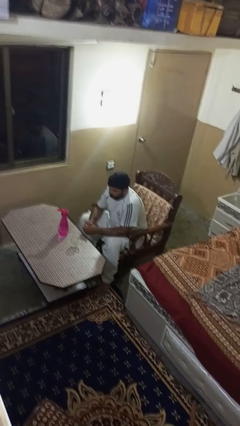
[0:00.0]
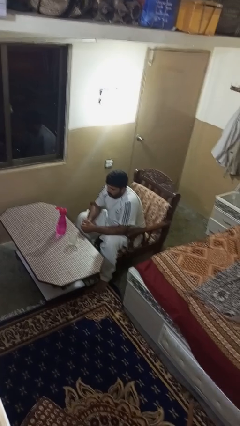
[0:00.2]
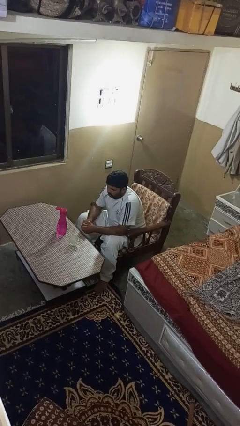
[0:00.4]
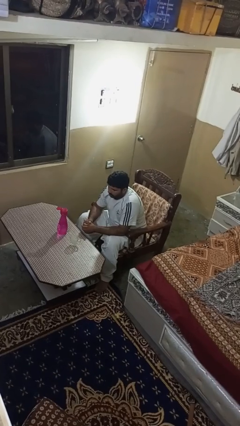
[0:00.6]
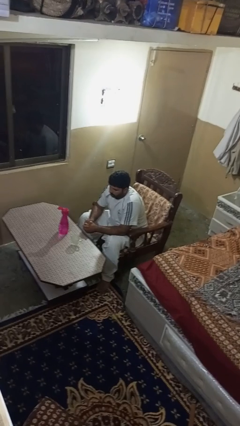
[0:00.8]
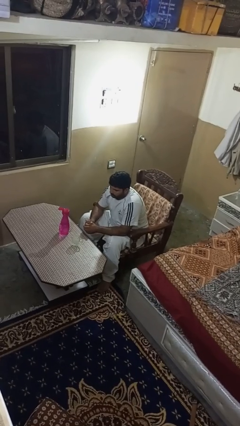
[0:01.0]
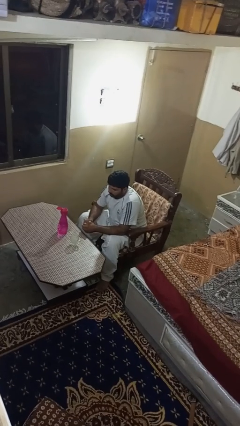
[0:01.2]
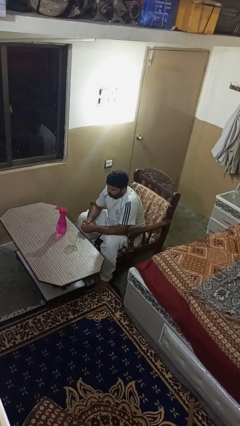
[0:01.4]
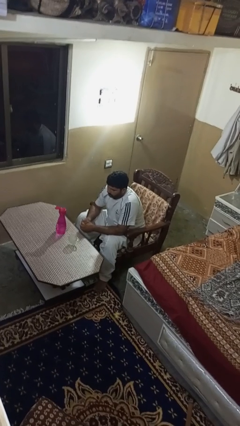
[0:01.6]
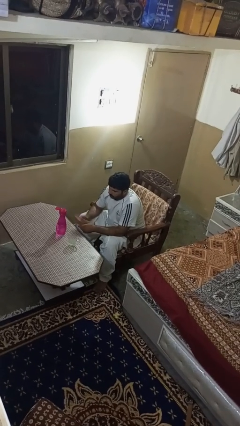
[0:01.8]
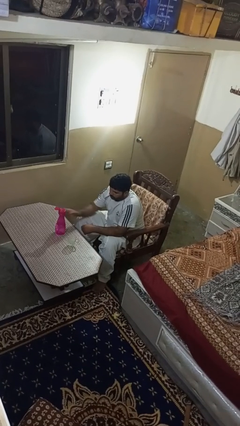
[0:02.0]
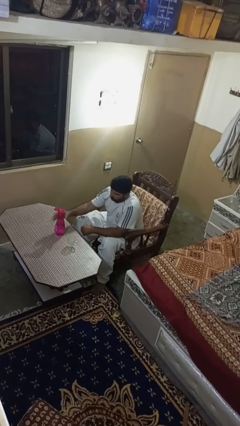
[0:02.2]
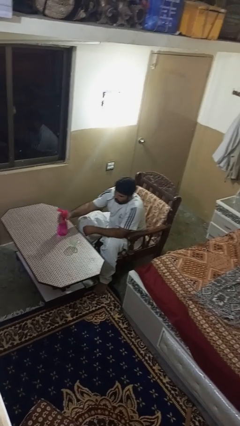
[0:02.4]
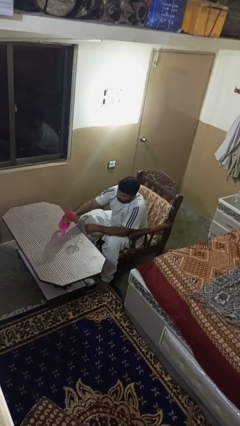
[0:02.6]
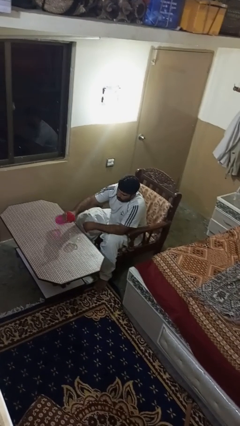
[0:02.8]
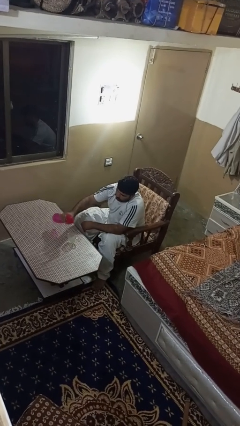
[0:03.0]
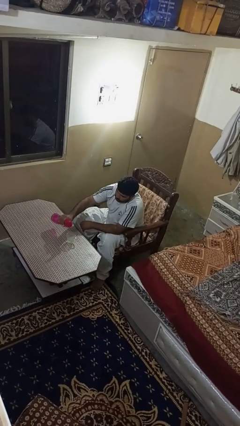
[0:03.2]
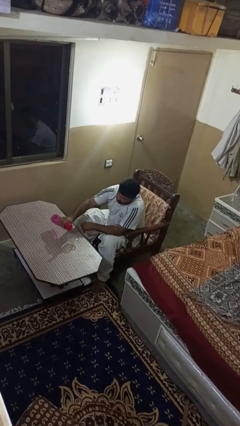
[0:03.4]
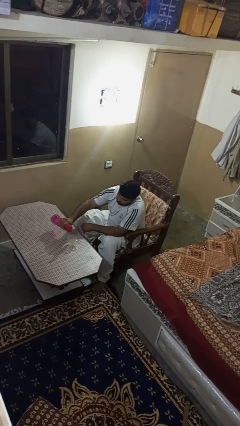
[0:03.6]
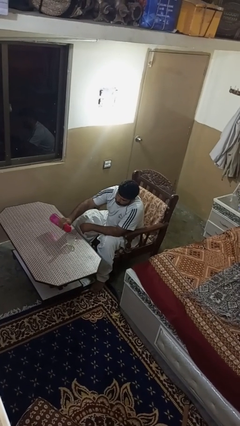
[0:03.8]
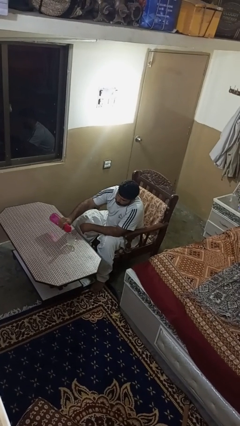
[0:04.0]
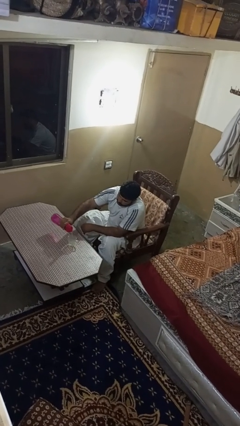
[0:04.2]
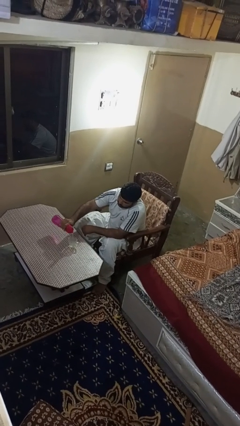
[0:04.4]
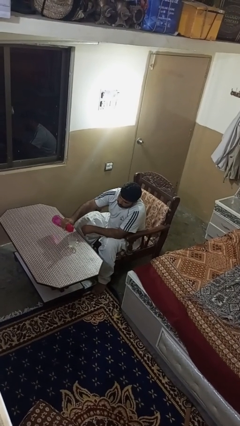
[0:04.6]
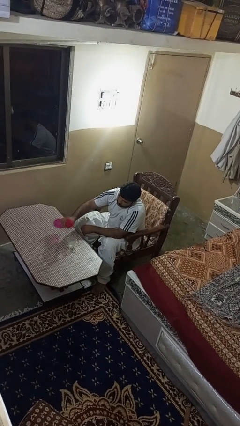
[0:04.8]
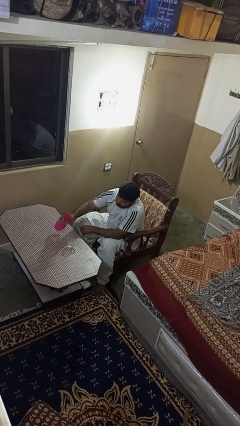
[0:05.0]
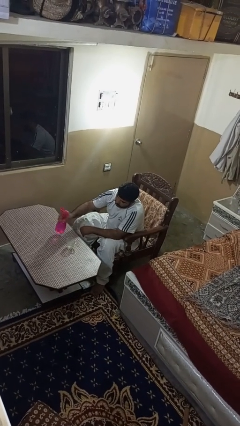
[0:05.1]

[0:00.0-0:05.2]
person pours liquid into cup

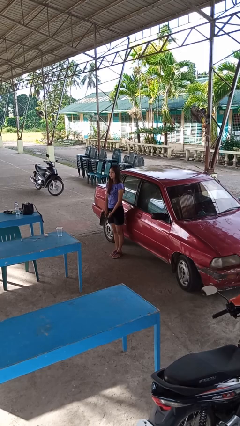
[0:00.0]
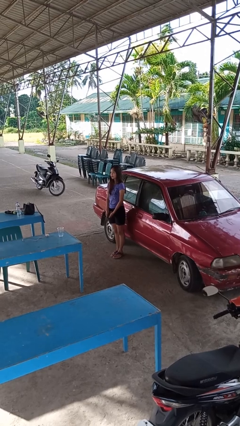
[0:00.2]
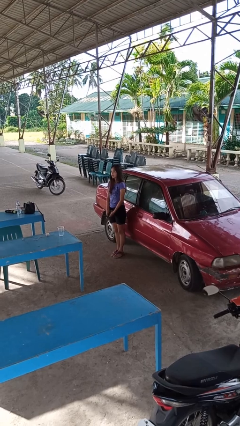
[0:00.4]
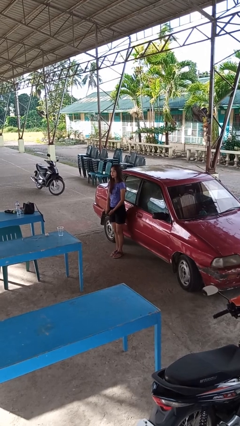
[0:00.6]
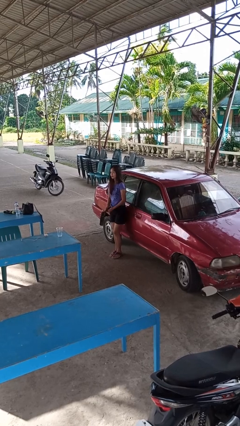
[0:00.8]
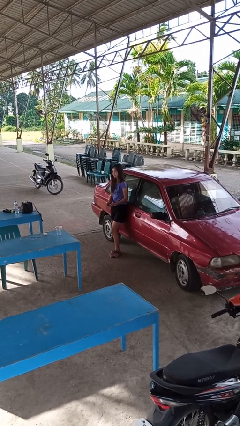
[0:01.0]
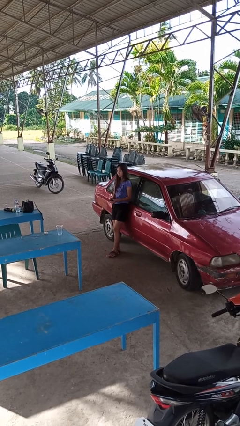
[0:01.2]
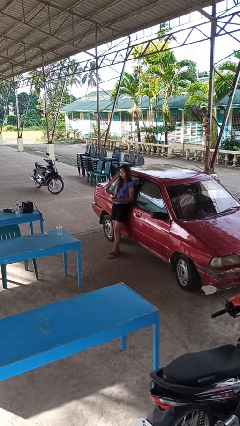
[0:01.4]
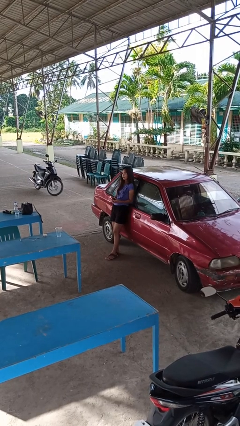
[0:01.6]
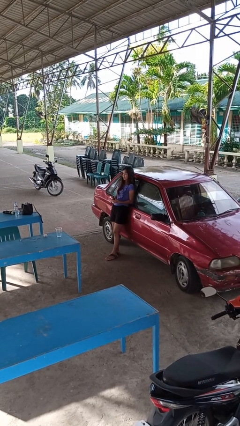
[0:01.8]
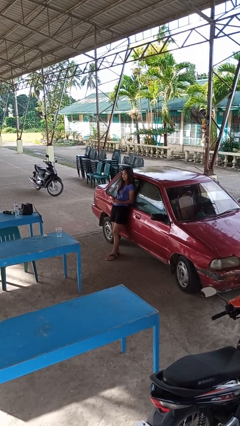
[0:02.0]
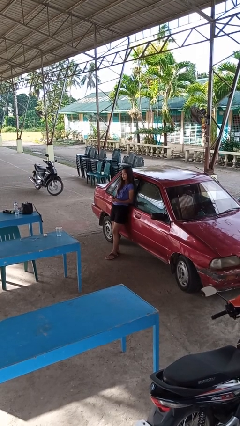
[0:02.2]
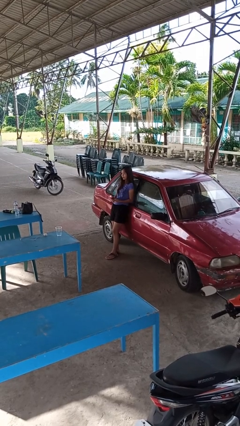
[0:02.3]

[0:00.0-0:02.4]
person leans against car

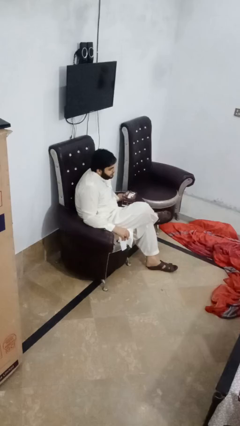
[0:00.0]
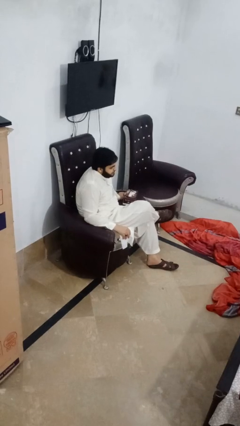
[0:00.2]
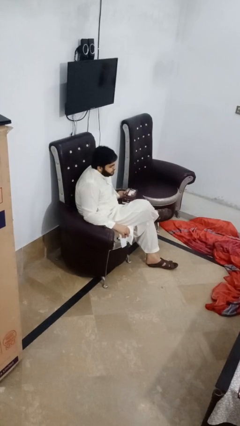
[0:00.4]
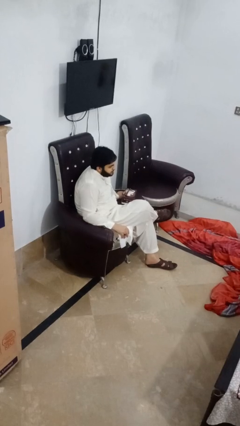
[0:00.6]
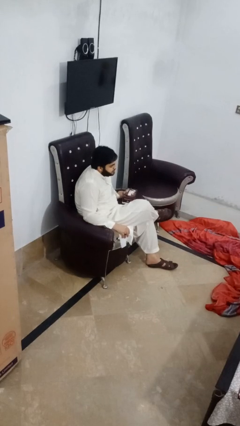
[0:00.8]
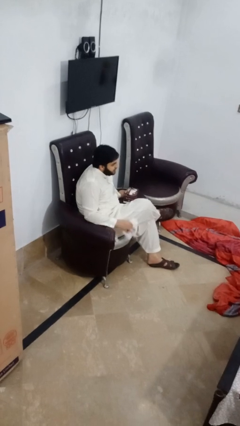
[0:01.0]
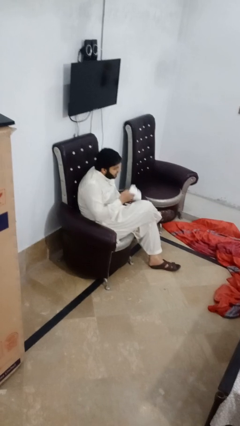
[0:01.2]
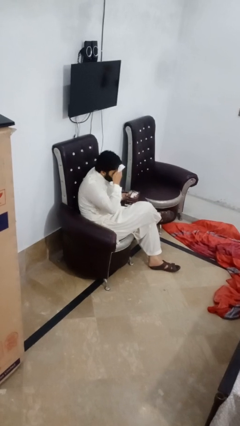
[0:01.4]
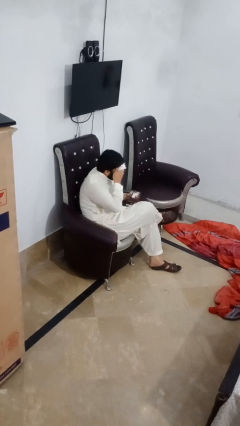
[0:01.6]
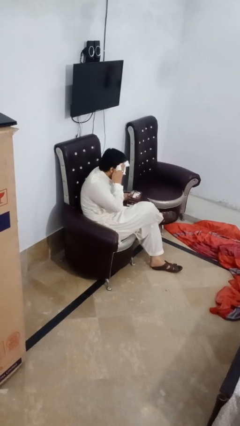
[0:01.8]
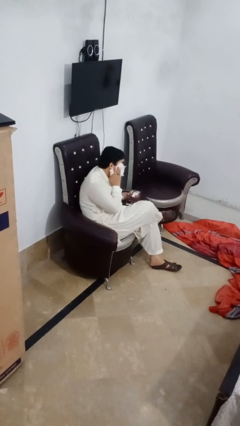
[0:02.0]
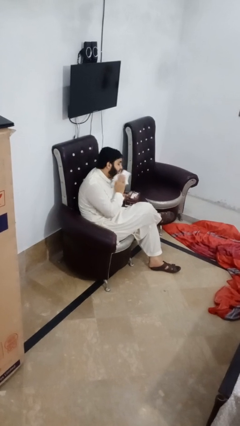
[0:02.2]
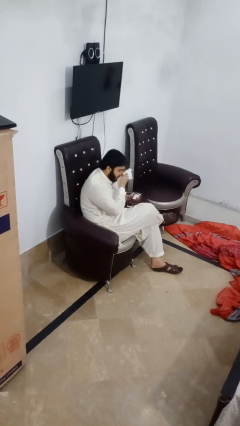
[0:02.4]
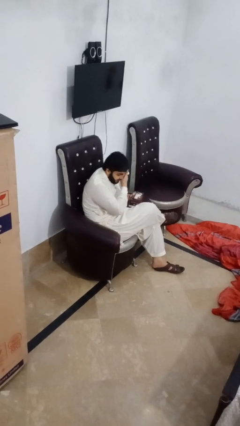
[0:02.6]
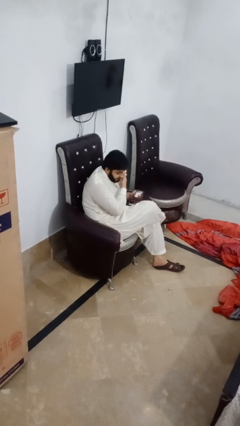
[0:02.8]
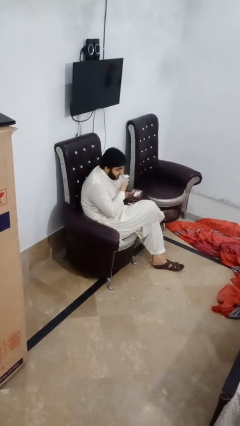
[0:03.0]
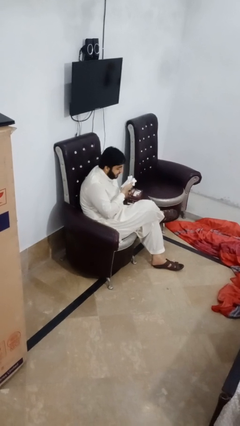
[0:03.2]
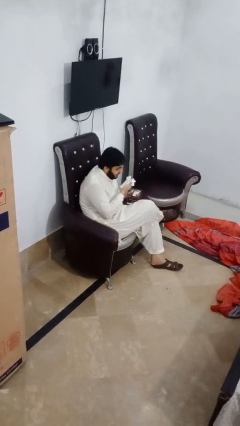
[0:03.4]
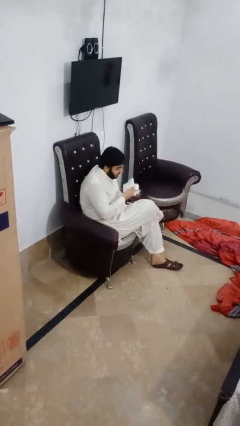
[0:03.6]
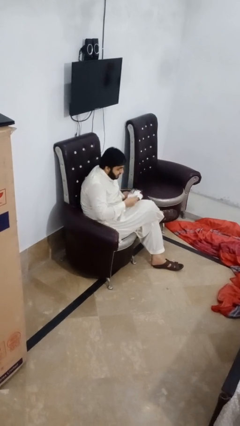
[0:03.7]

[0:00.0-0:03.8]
person wipes mouth with napkin

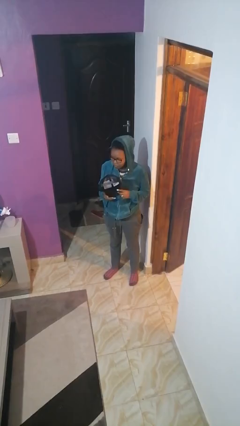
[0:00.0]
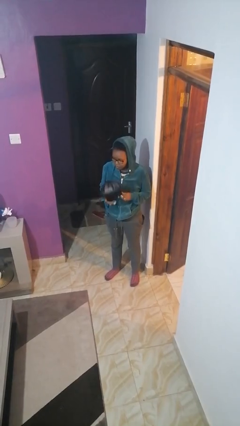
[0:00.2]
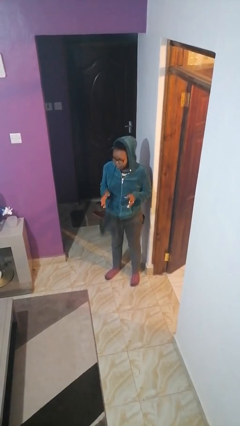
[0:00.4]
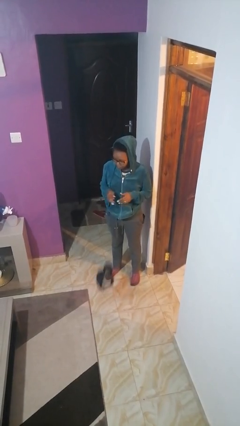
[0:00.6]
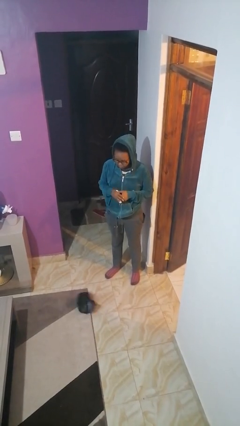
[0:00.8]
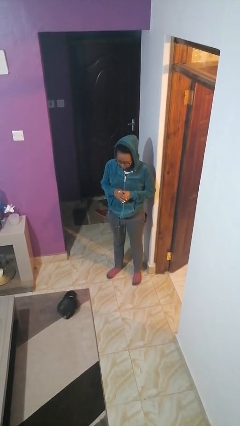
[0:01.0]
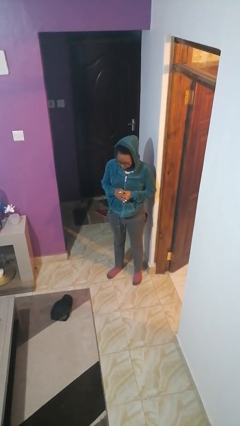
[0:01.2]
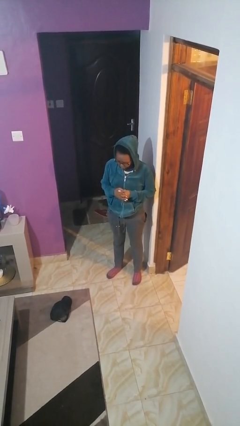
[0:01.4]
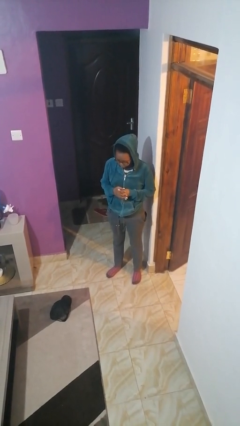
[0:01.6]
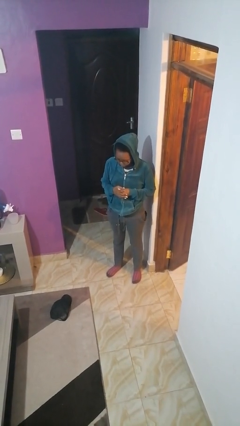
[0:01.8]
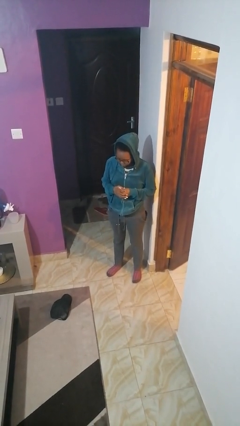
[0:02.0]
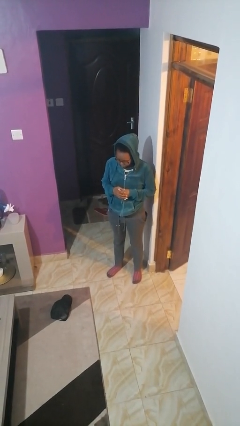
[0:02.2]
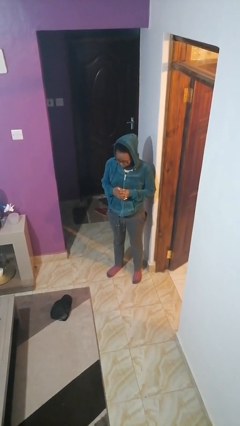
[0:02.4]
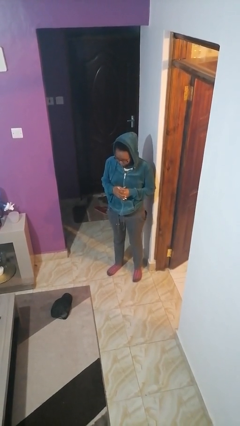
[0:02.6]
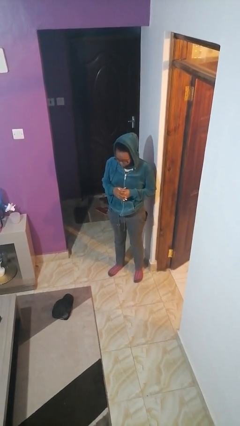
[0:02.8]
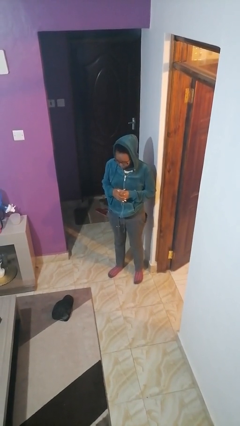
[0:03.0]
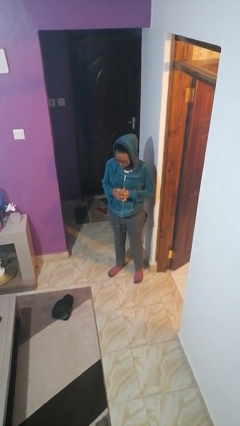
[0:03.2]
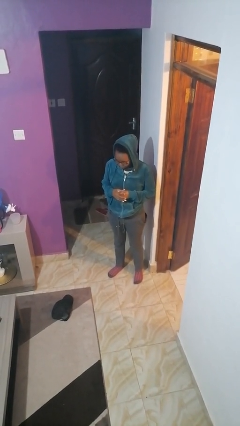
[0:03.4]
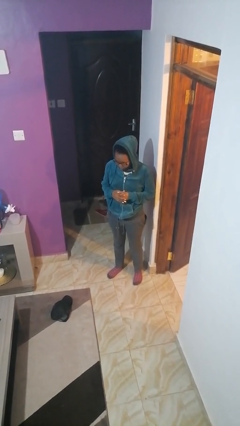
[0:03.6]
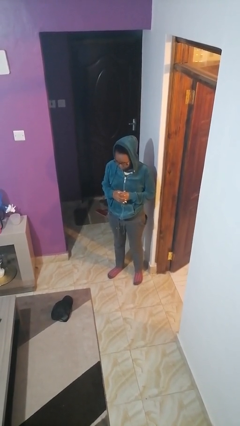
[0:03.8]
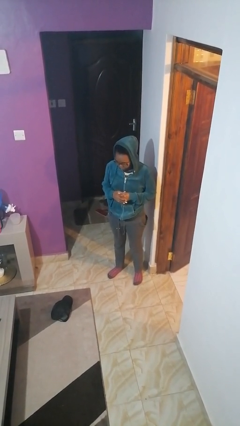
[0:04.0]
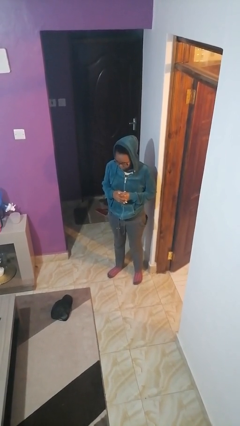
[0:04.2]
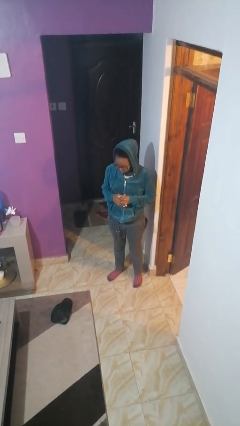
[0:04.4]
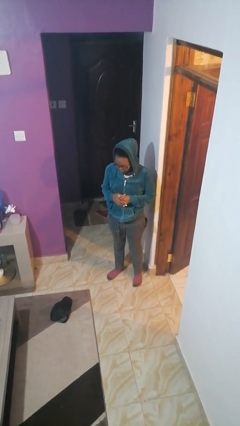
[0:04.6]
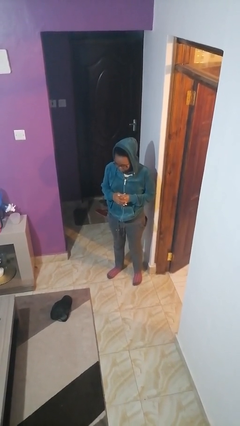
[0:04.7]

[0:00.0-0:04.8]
person drops object

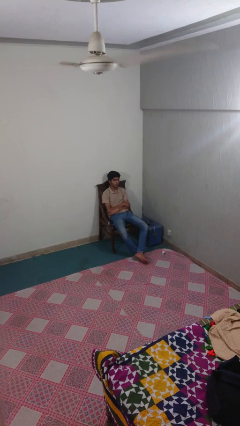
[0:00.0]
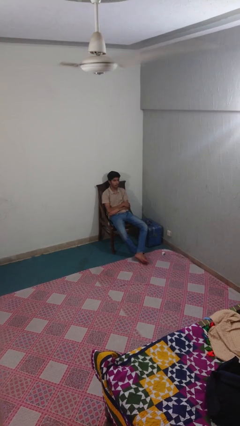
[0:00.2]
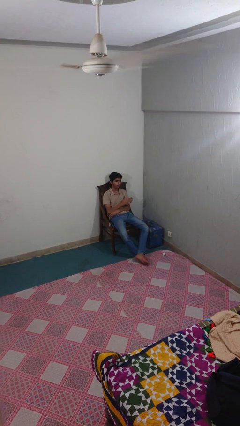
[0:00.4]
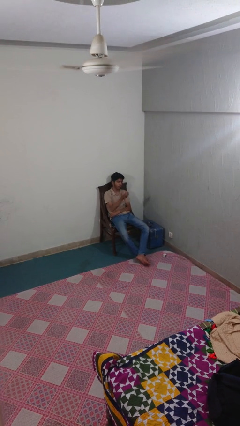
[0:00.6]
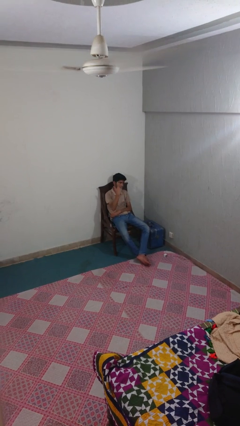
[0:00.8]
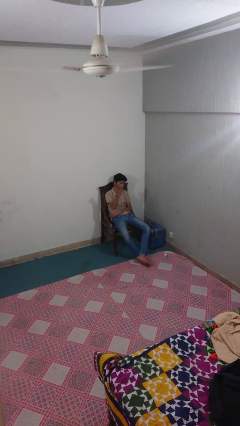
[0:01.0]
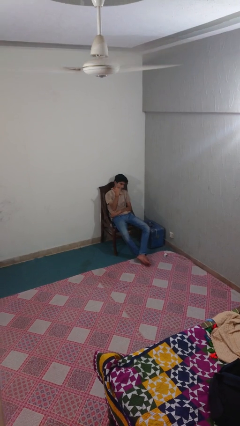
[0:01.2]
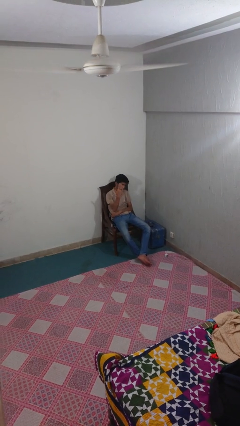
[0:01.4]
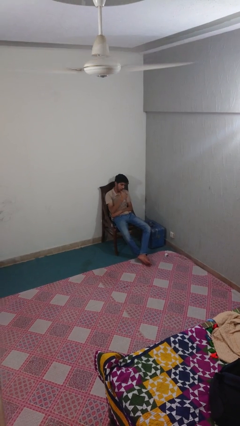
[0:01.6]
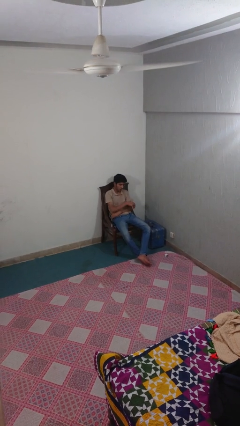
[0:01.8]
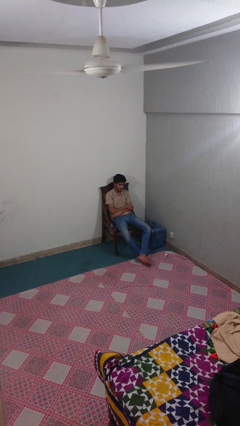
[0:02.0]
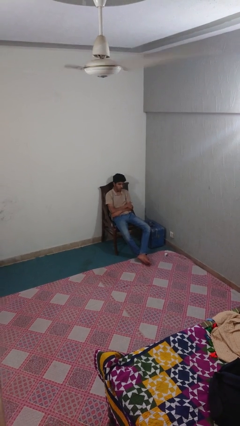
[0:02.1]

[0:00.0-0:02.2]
person gestures come here
